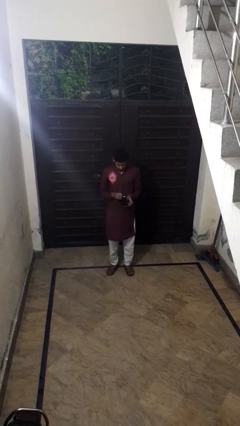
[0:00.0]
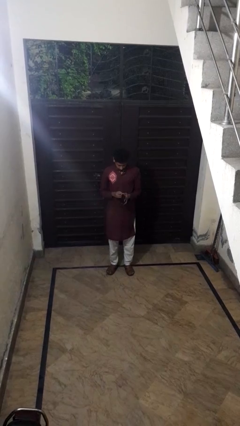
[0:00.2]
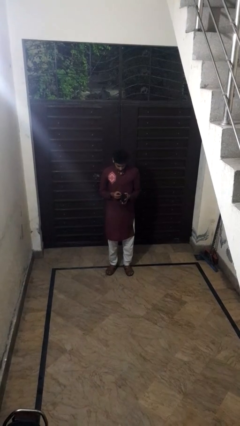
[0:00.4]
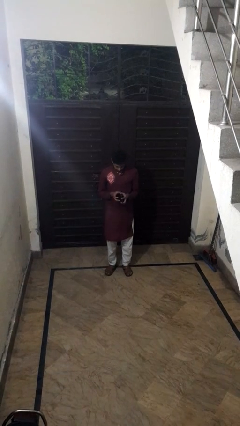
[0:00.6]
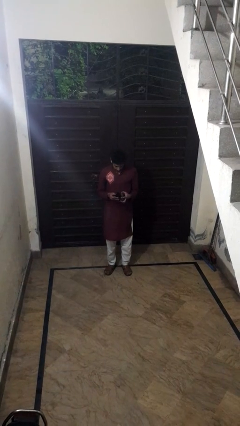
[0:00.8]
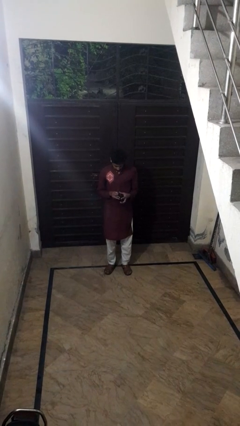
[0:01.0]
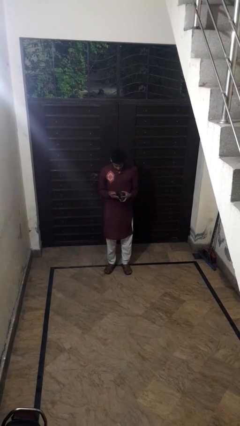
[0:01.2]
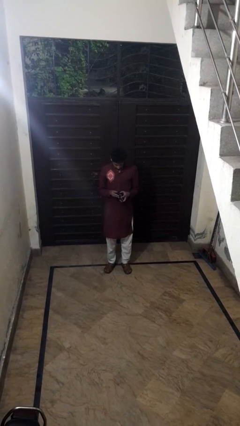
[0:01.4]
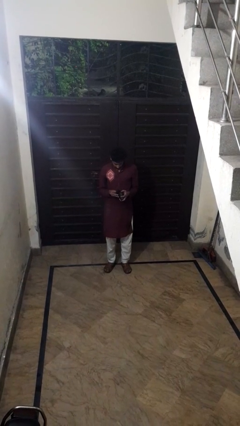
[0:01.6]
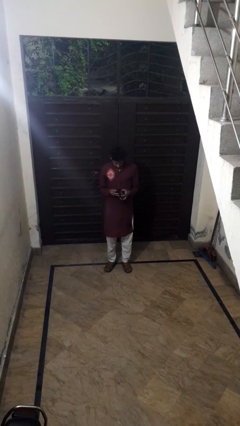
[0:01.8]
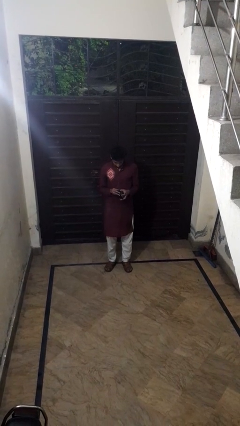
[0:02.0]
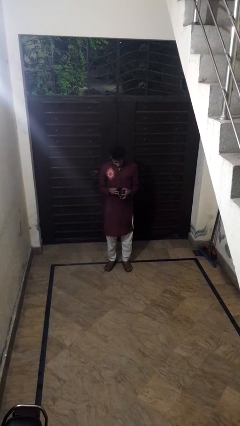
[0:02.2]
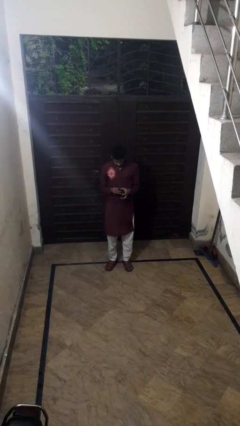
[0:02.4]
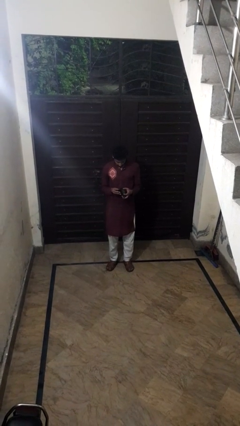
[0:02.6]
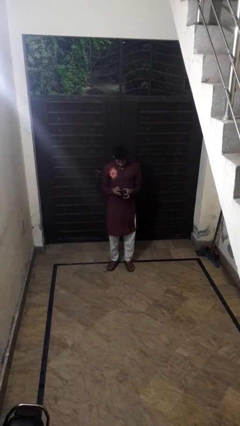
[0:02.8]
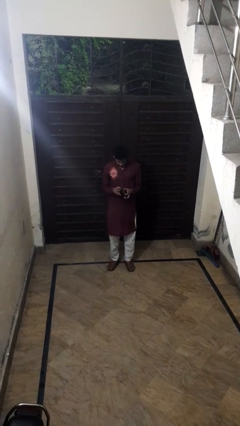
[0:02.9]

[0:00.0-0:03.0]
person searches in purse

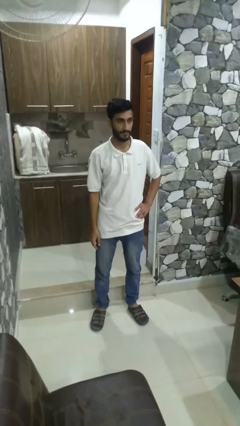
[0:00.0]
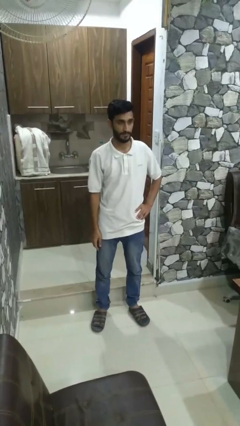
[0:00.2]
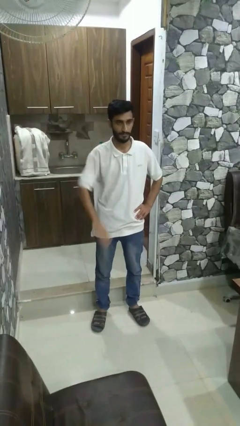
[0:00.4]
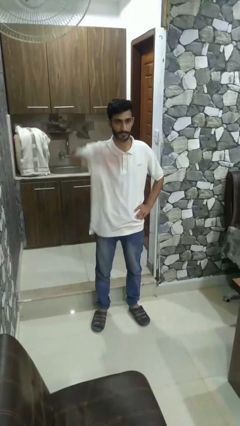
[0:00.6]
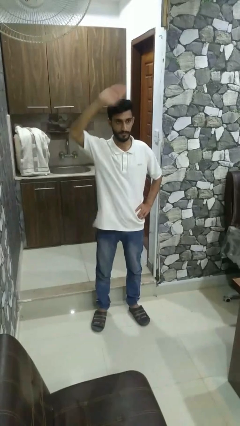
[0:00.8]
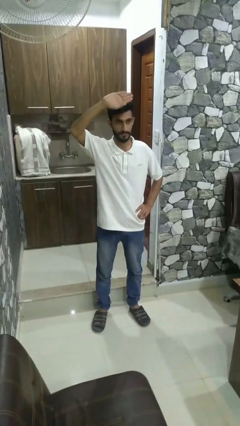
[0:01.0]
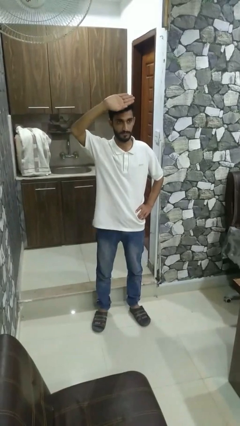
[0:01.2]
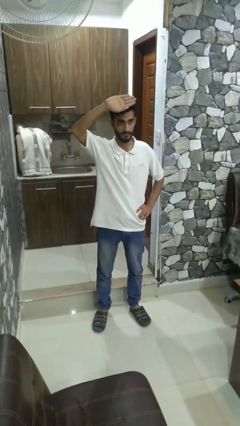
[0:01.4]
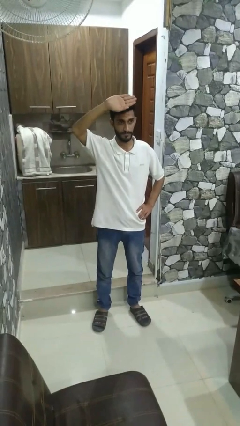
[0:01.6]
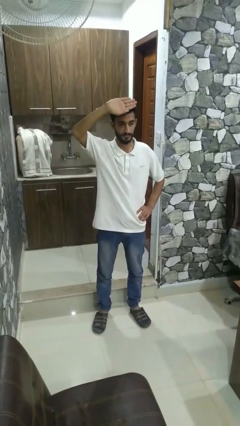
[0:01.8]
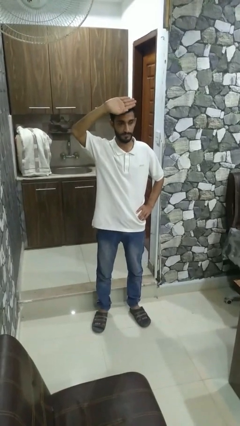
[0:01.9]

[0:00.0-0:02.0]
person gestures swipe up

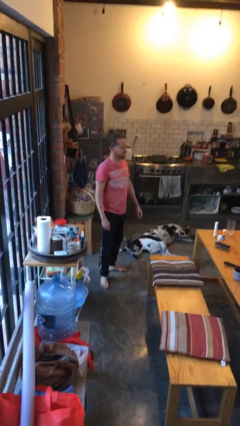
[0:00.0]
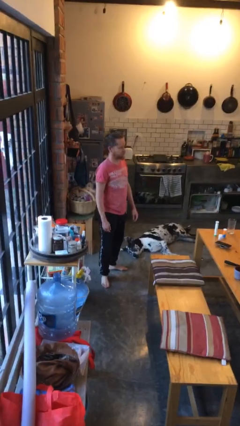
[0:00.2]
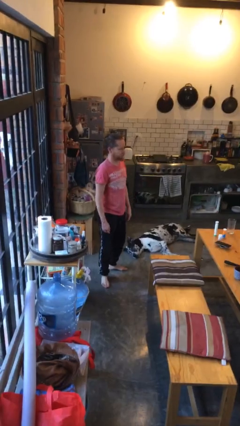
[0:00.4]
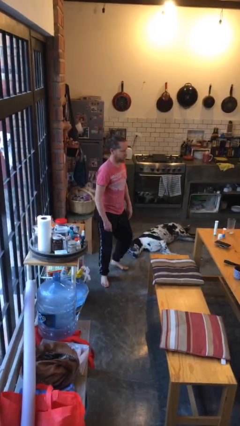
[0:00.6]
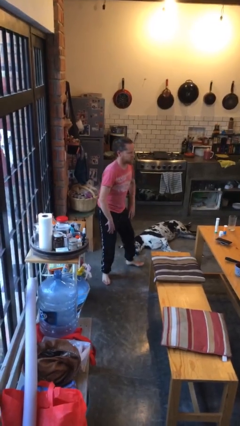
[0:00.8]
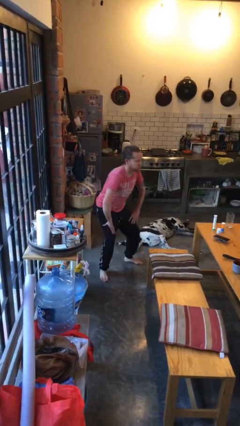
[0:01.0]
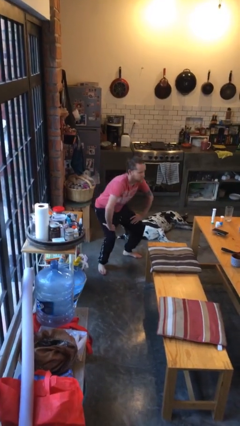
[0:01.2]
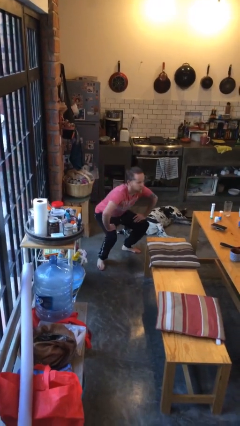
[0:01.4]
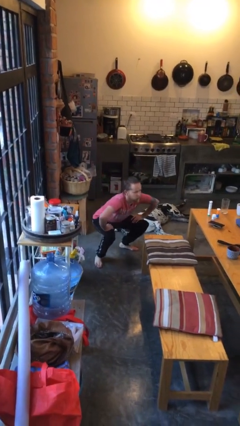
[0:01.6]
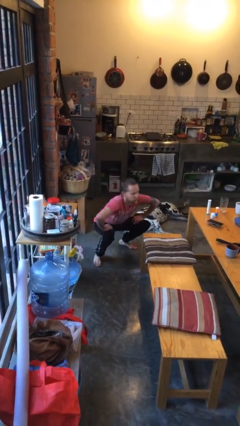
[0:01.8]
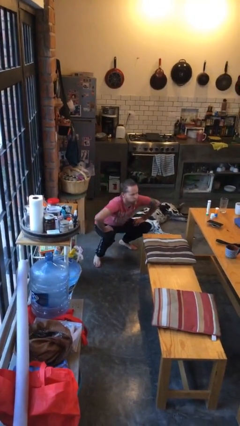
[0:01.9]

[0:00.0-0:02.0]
person squats

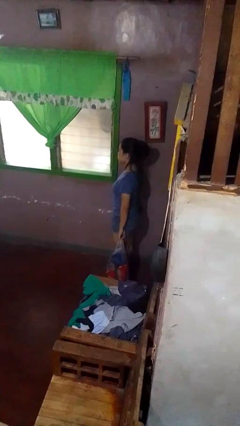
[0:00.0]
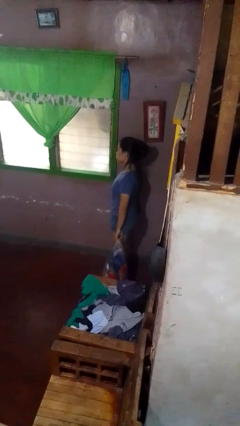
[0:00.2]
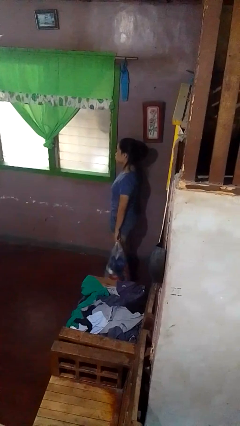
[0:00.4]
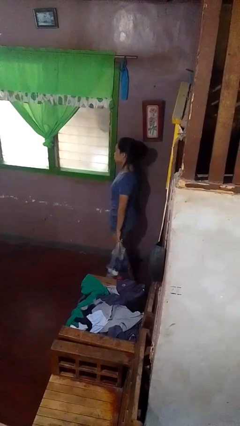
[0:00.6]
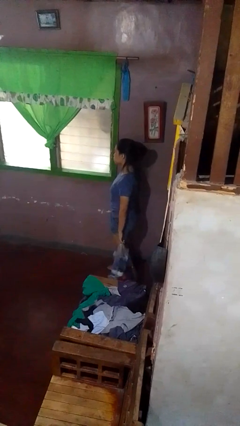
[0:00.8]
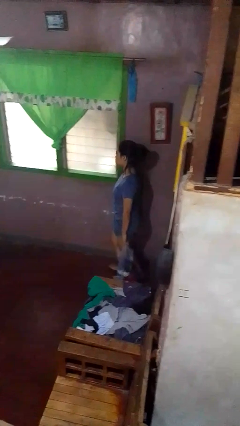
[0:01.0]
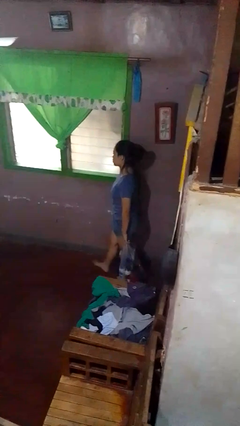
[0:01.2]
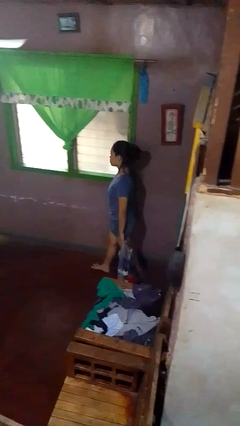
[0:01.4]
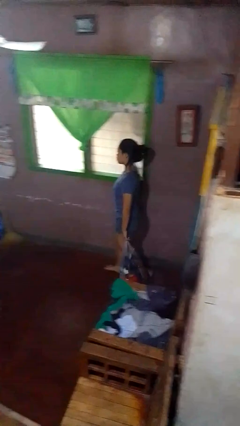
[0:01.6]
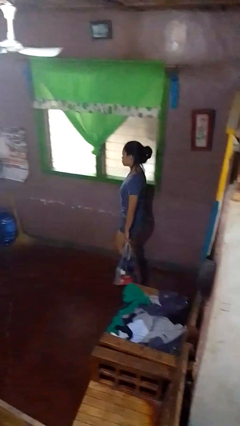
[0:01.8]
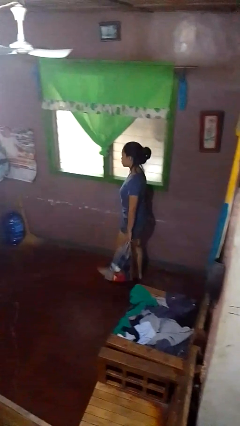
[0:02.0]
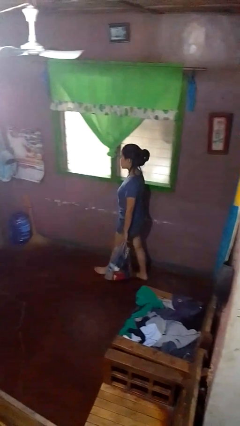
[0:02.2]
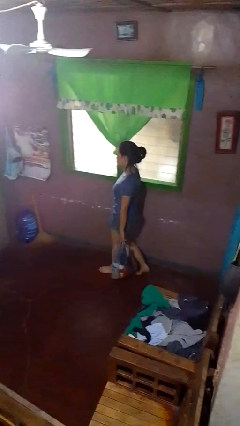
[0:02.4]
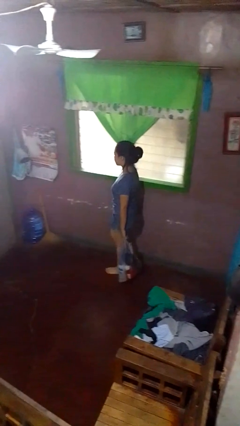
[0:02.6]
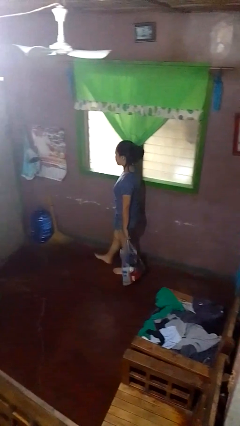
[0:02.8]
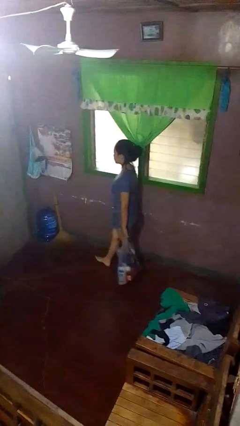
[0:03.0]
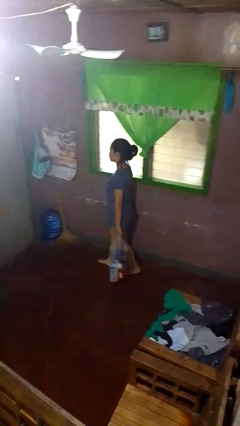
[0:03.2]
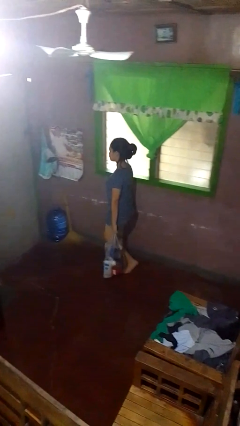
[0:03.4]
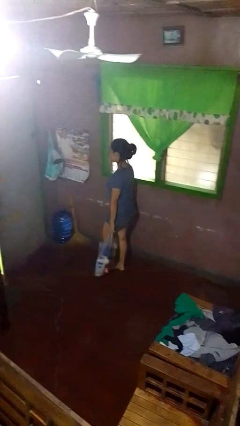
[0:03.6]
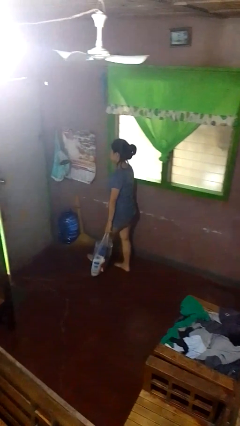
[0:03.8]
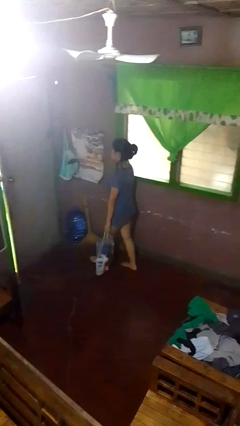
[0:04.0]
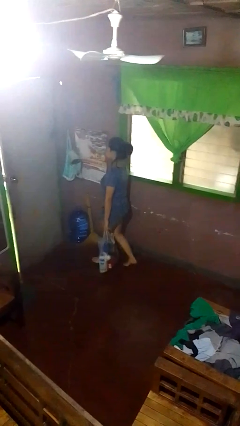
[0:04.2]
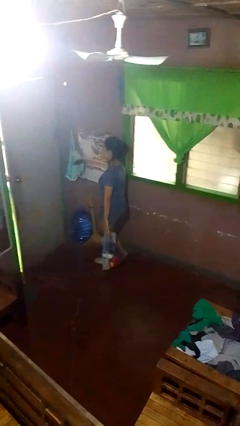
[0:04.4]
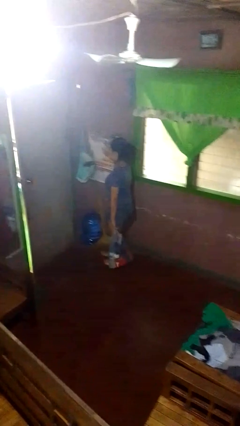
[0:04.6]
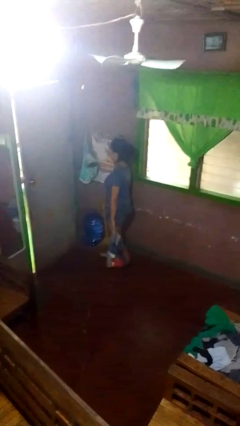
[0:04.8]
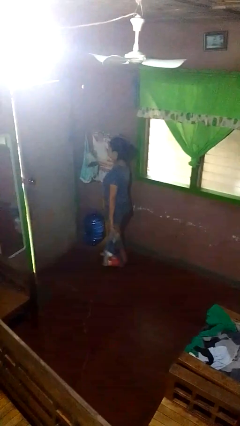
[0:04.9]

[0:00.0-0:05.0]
person carries groceries

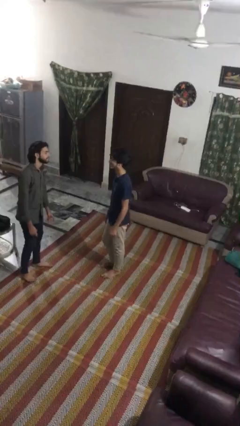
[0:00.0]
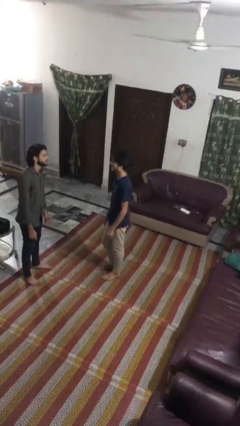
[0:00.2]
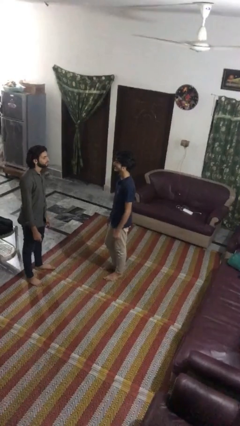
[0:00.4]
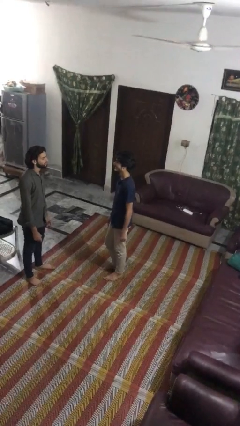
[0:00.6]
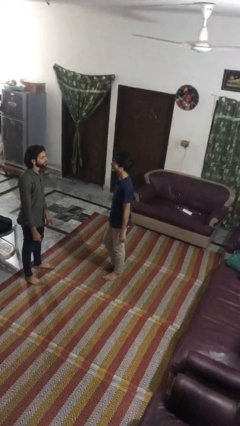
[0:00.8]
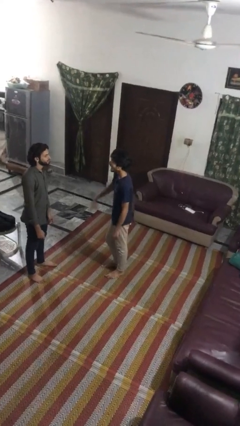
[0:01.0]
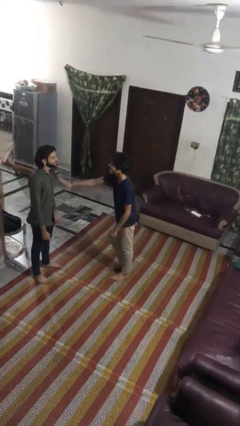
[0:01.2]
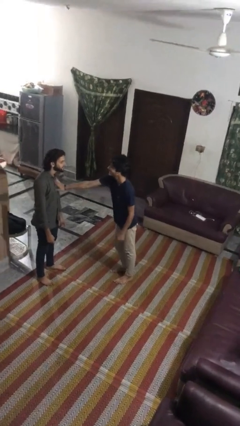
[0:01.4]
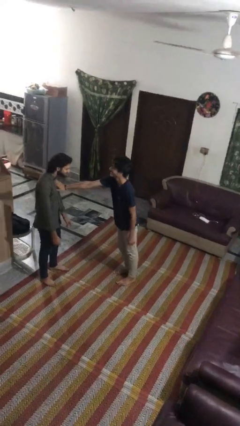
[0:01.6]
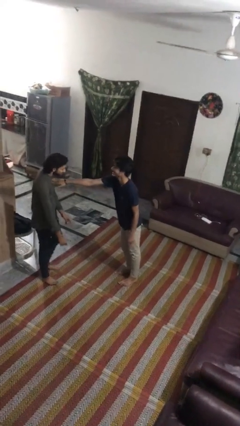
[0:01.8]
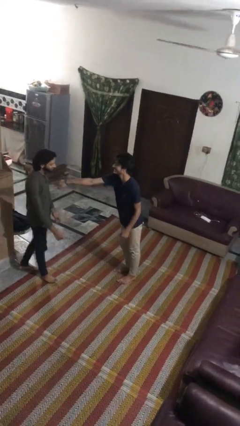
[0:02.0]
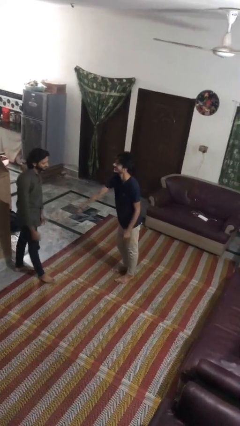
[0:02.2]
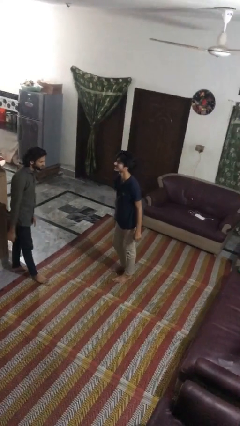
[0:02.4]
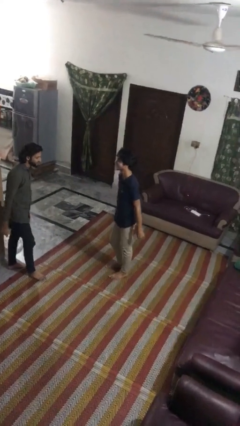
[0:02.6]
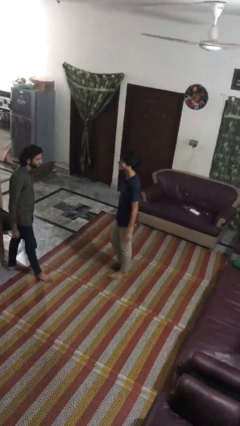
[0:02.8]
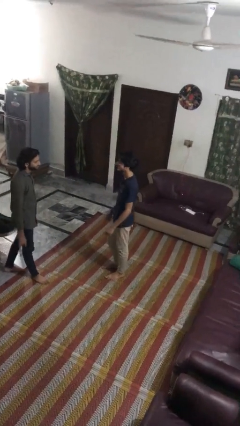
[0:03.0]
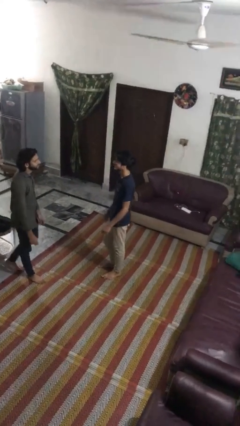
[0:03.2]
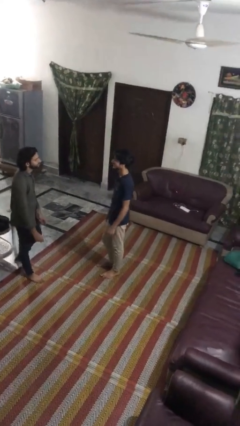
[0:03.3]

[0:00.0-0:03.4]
person shoves person

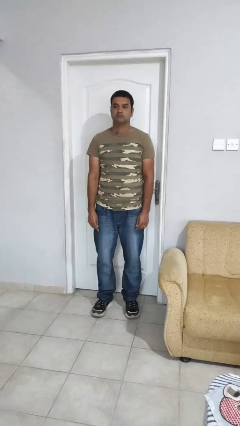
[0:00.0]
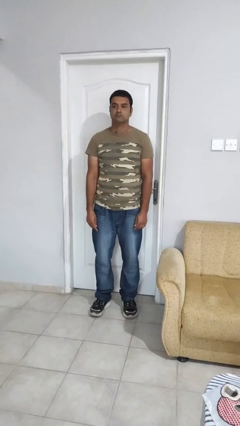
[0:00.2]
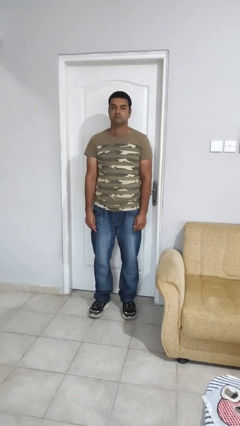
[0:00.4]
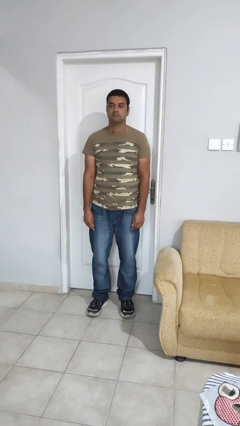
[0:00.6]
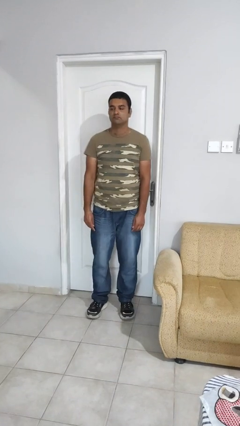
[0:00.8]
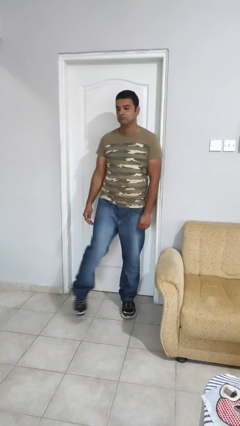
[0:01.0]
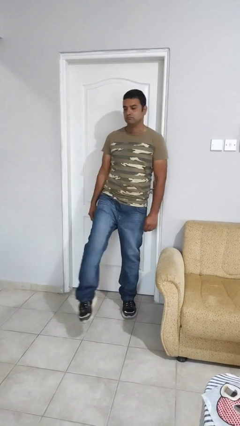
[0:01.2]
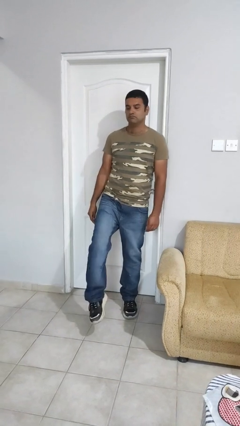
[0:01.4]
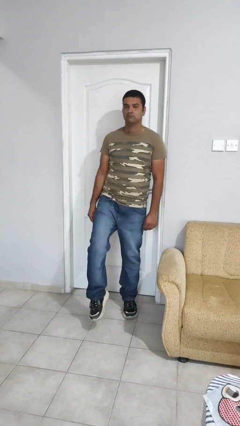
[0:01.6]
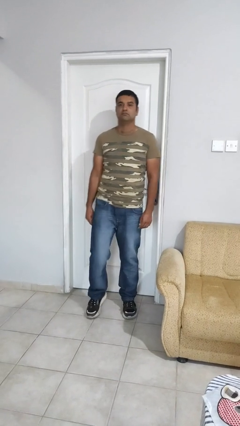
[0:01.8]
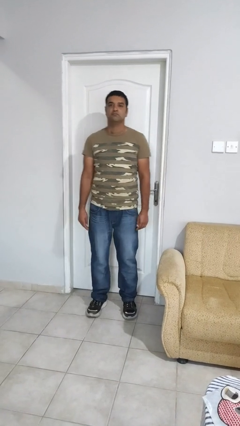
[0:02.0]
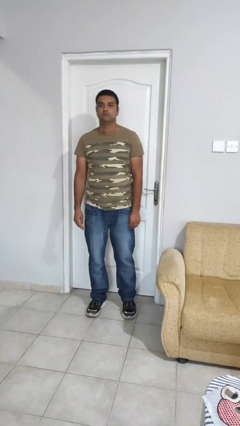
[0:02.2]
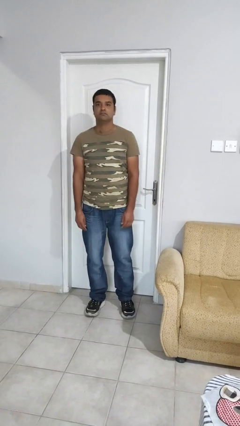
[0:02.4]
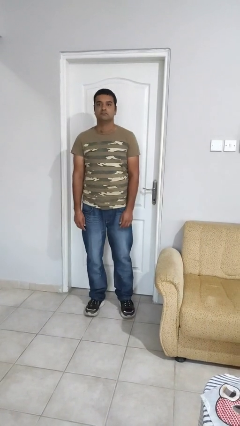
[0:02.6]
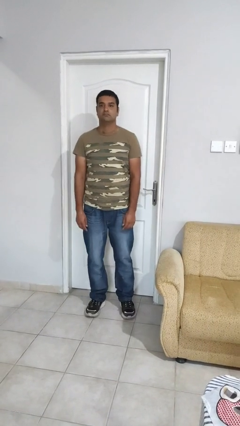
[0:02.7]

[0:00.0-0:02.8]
person karate kicks
